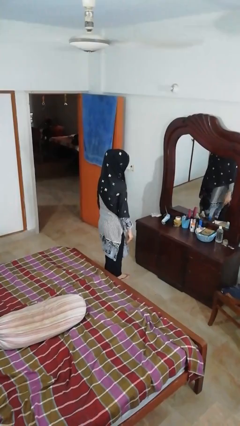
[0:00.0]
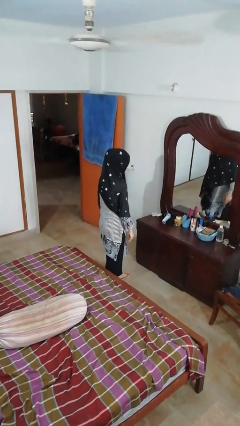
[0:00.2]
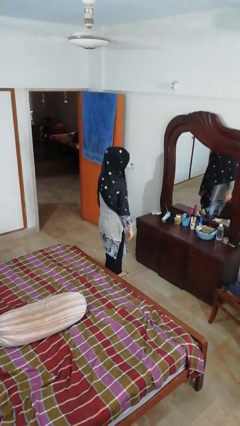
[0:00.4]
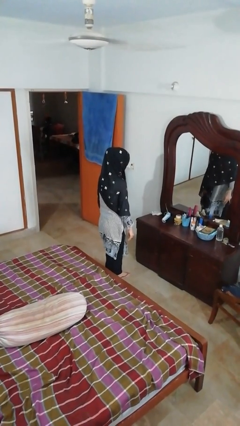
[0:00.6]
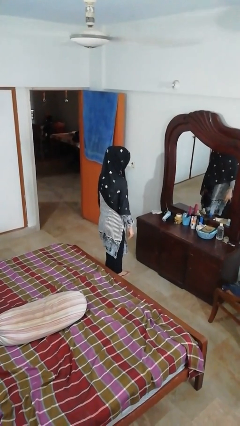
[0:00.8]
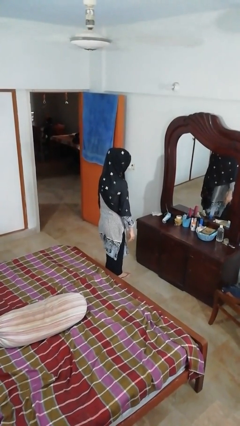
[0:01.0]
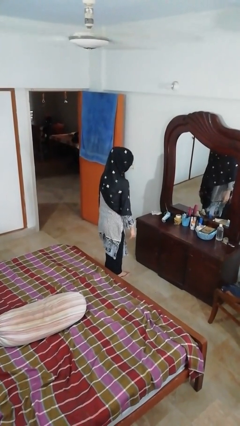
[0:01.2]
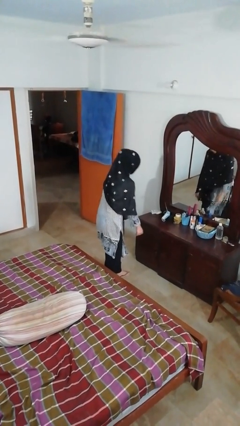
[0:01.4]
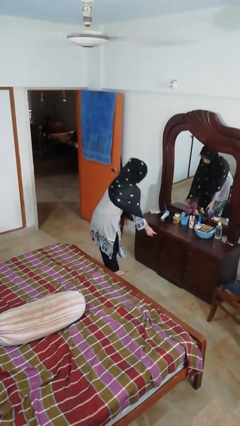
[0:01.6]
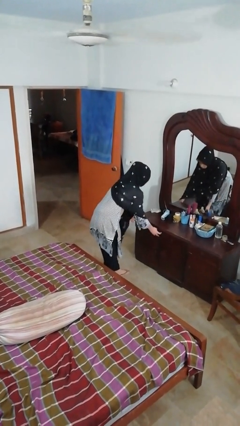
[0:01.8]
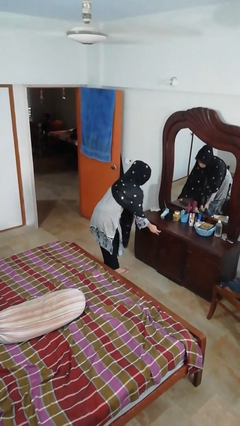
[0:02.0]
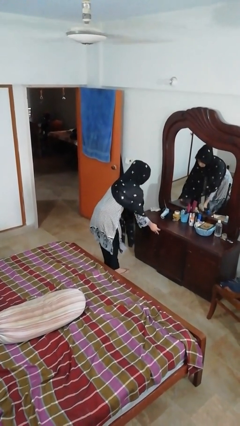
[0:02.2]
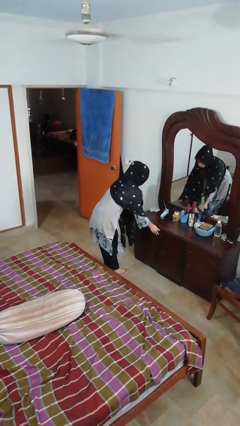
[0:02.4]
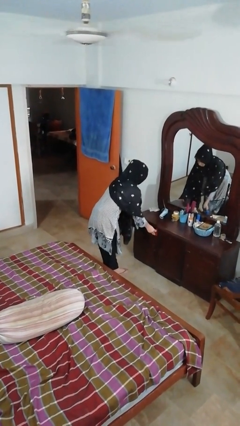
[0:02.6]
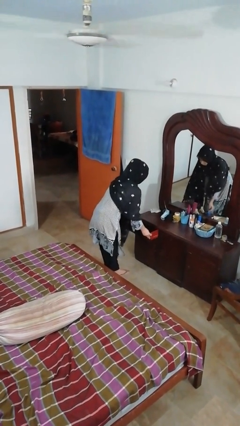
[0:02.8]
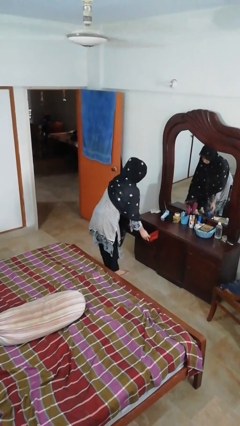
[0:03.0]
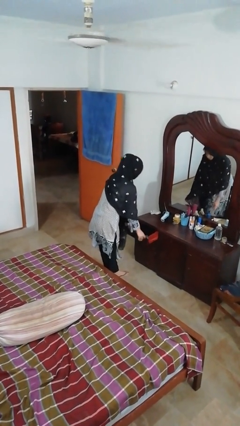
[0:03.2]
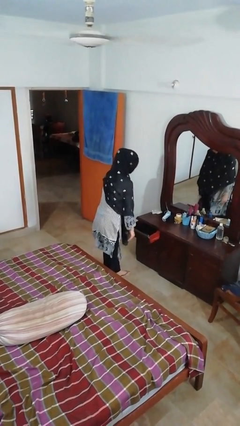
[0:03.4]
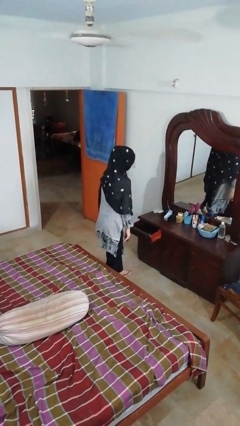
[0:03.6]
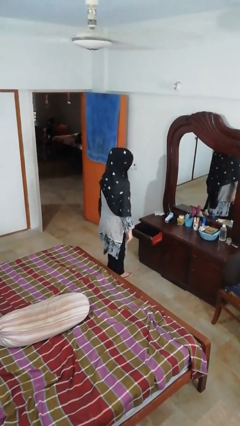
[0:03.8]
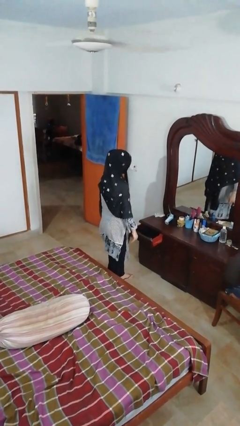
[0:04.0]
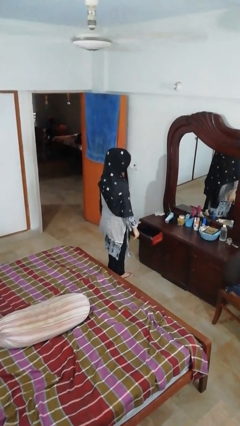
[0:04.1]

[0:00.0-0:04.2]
person opens dresser drawer

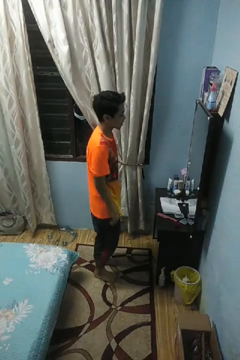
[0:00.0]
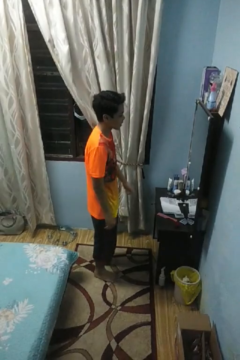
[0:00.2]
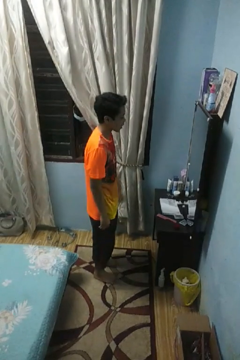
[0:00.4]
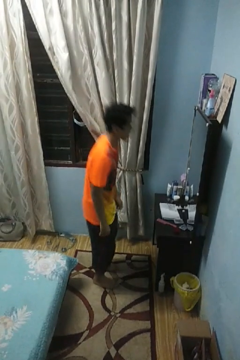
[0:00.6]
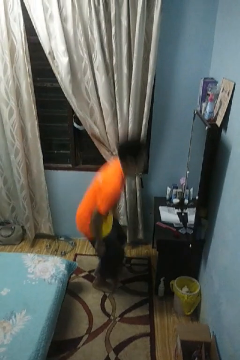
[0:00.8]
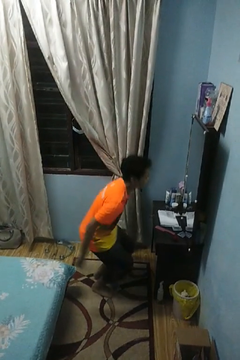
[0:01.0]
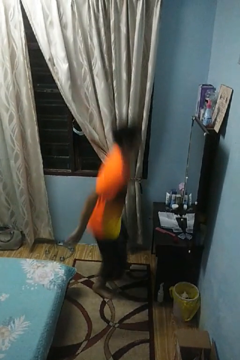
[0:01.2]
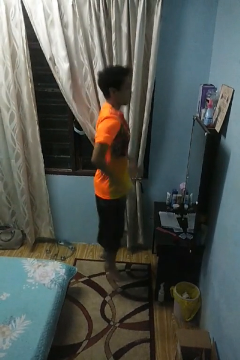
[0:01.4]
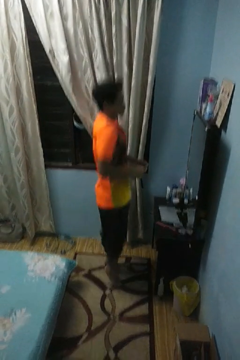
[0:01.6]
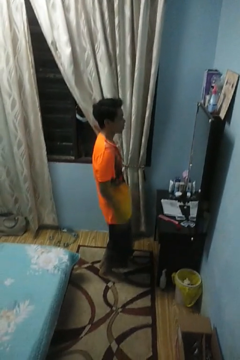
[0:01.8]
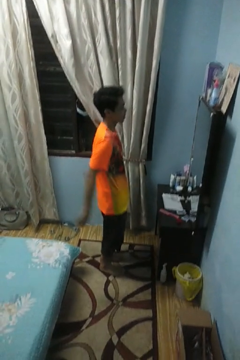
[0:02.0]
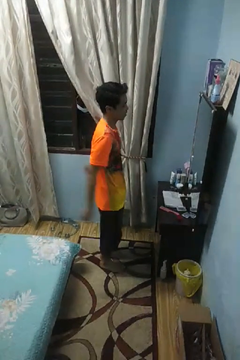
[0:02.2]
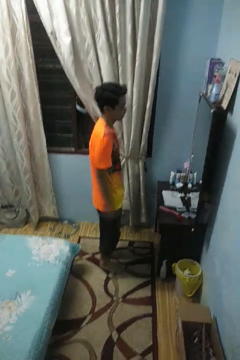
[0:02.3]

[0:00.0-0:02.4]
person jumps

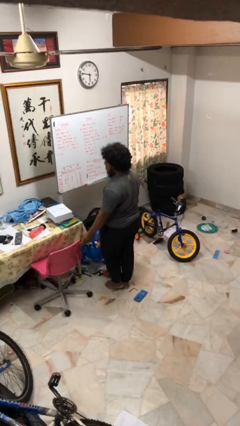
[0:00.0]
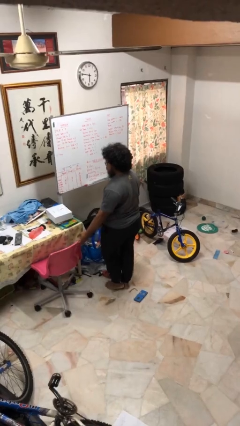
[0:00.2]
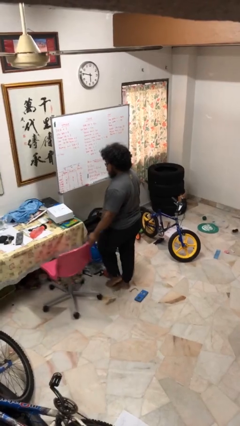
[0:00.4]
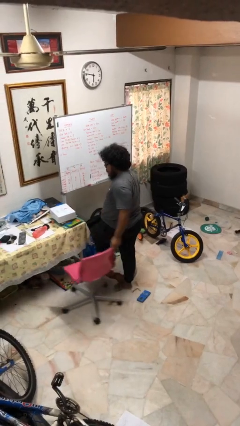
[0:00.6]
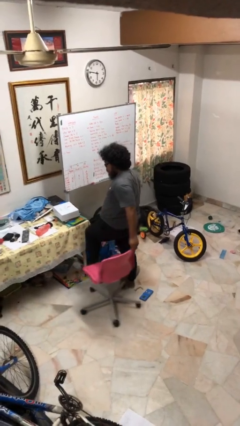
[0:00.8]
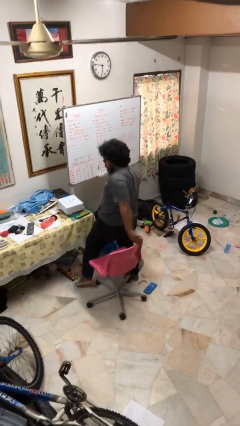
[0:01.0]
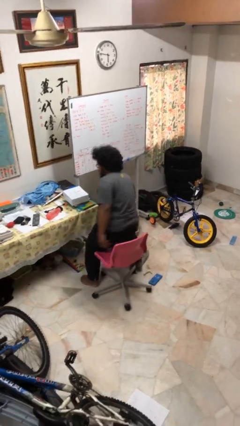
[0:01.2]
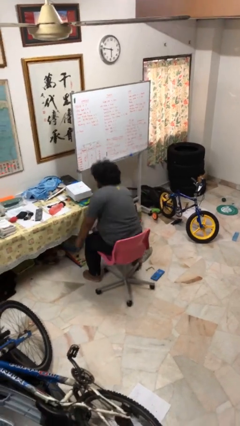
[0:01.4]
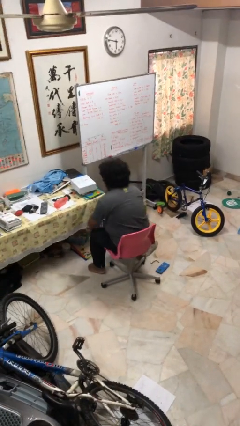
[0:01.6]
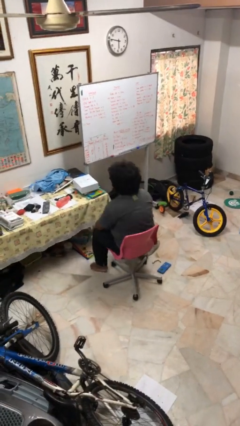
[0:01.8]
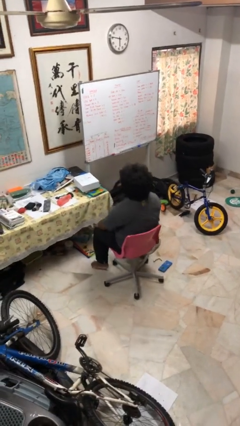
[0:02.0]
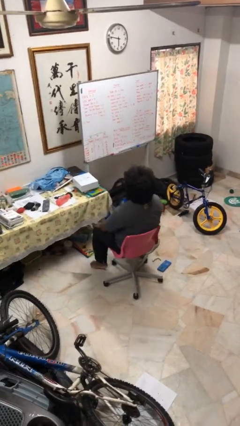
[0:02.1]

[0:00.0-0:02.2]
person sits down

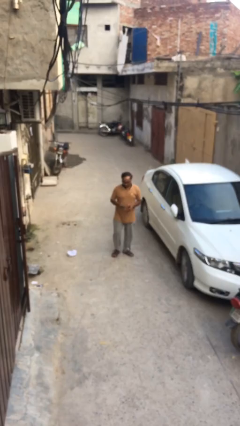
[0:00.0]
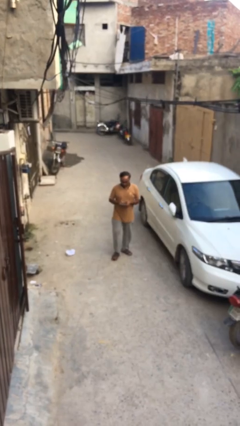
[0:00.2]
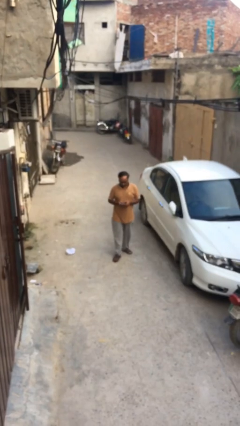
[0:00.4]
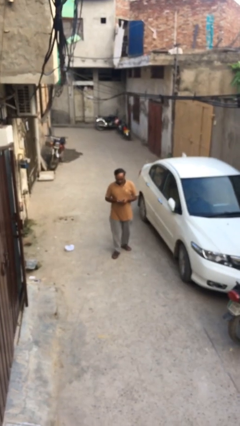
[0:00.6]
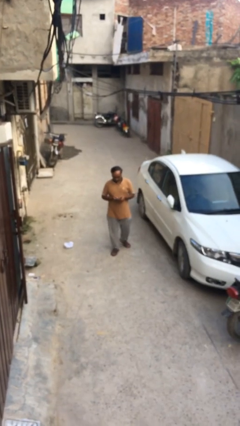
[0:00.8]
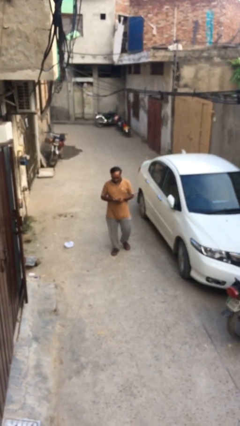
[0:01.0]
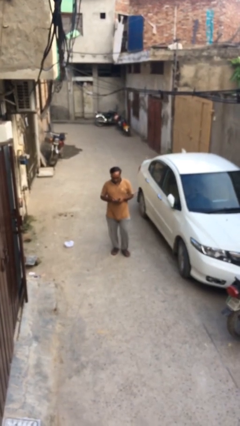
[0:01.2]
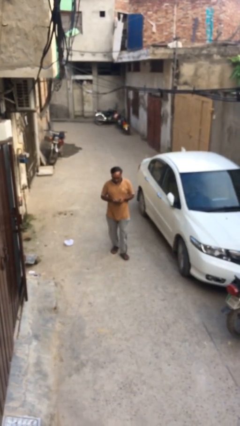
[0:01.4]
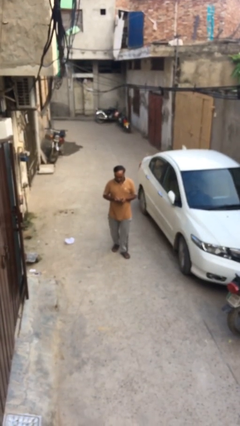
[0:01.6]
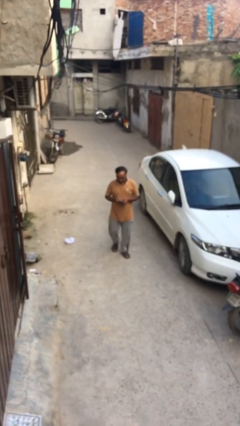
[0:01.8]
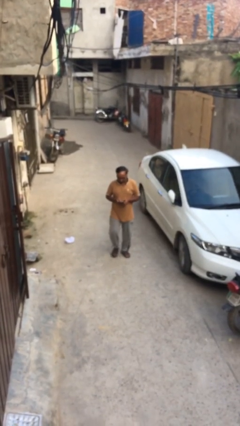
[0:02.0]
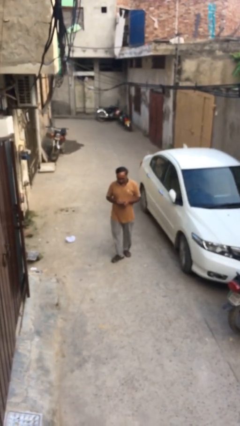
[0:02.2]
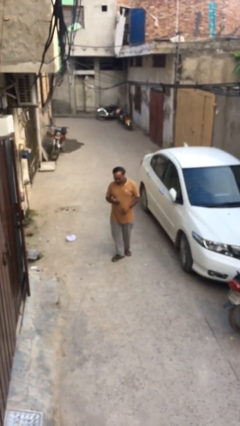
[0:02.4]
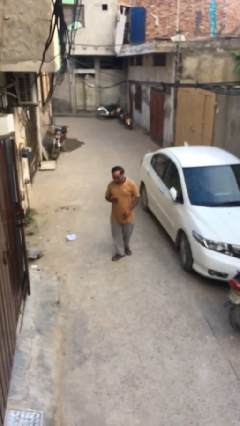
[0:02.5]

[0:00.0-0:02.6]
person texts on phone

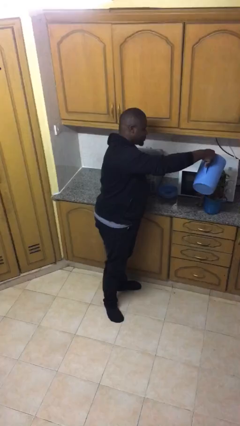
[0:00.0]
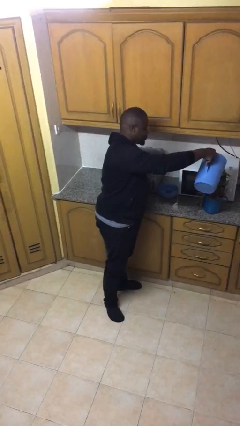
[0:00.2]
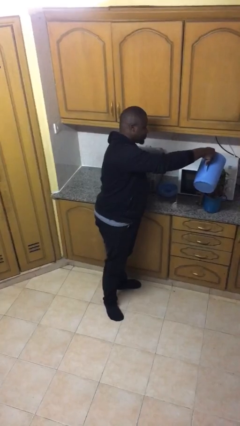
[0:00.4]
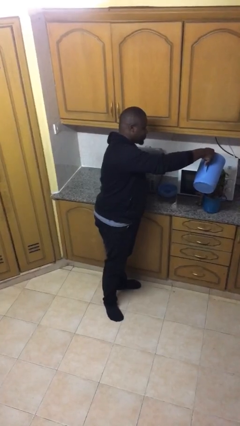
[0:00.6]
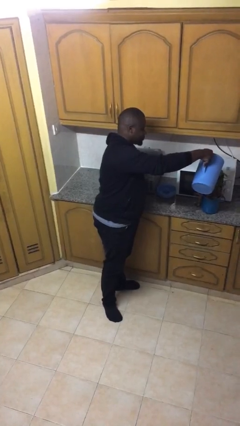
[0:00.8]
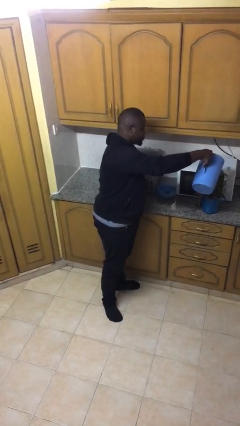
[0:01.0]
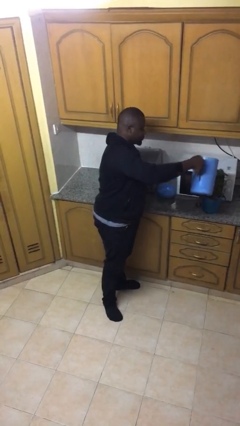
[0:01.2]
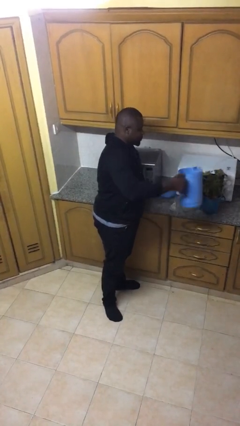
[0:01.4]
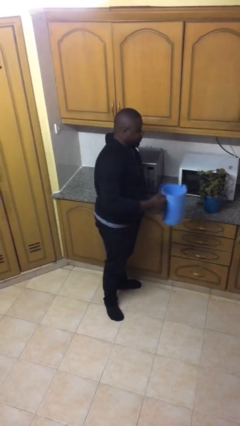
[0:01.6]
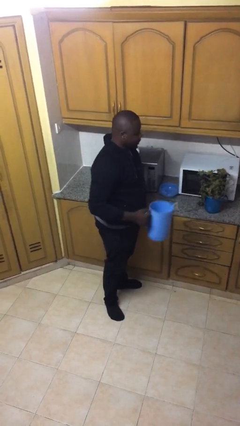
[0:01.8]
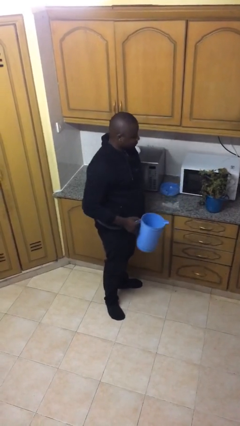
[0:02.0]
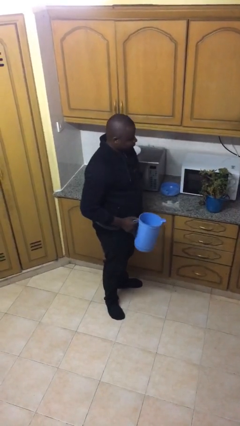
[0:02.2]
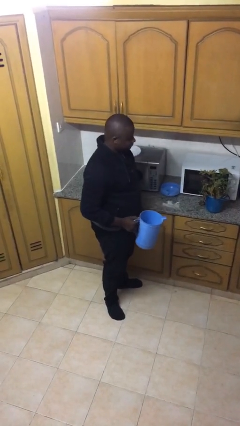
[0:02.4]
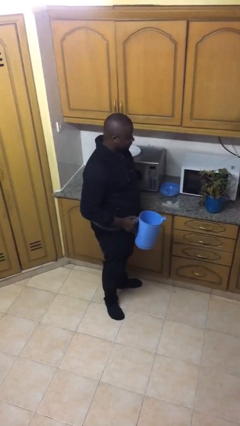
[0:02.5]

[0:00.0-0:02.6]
person waters houseplant

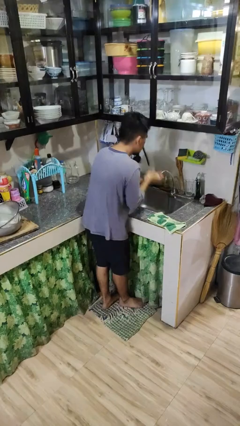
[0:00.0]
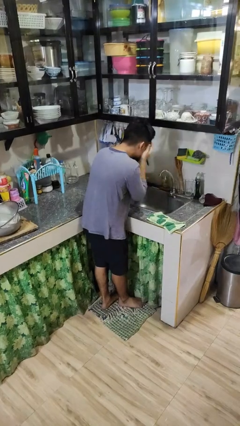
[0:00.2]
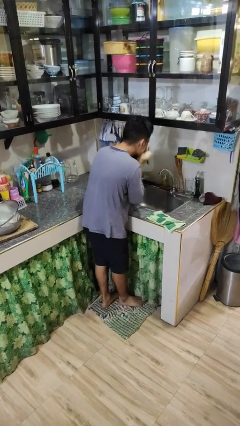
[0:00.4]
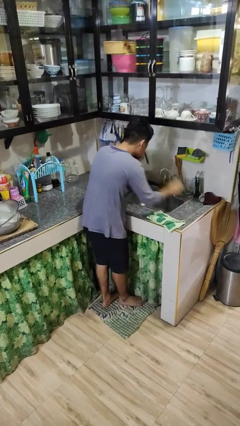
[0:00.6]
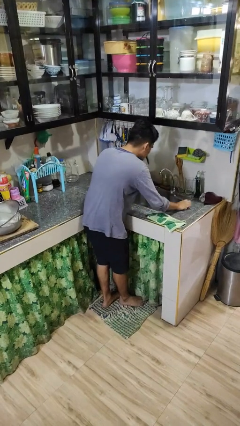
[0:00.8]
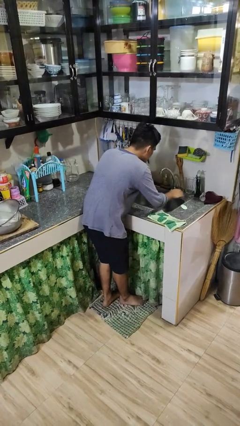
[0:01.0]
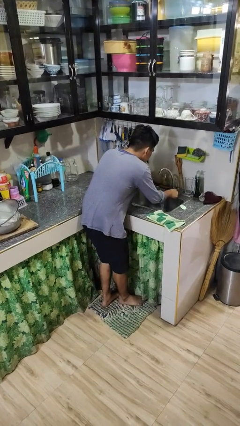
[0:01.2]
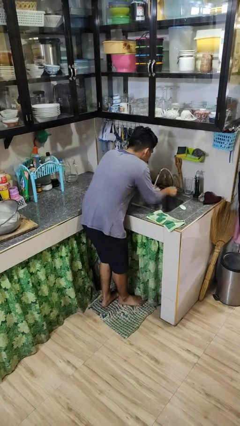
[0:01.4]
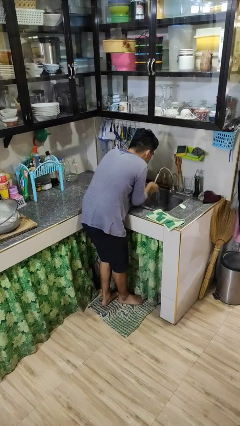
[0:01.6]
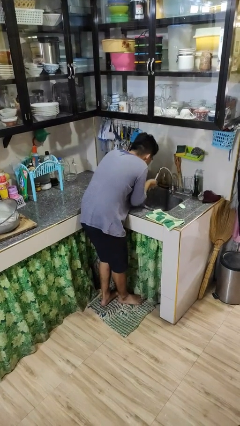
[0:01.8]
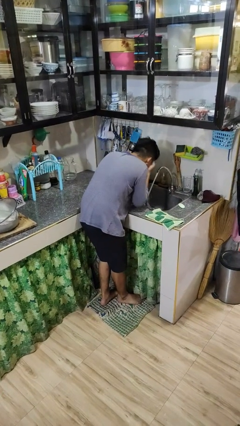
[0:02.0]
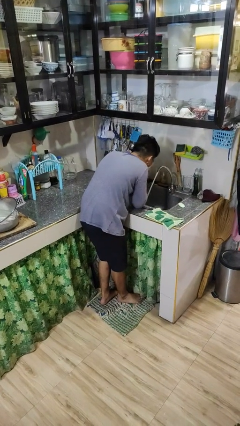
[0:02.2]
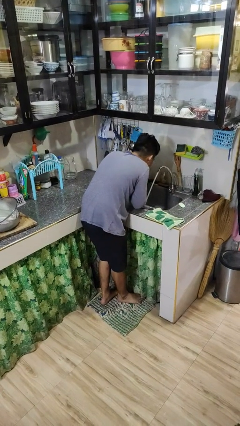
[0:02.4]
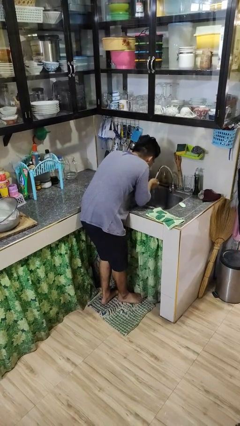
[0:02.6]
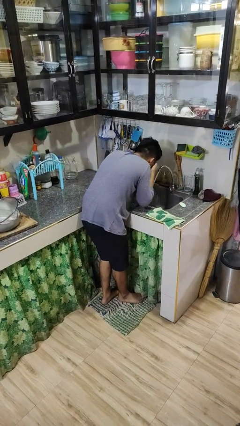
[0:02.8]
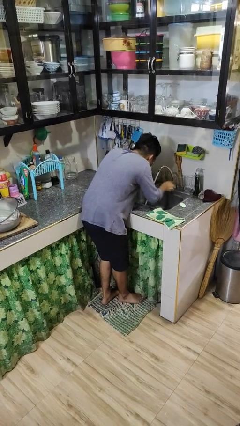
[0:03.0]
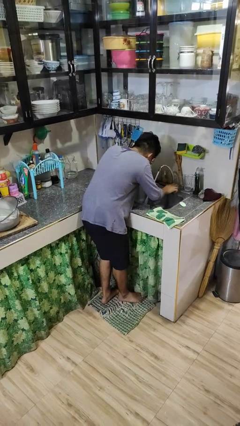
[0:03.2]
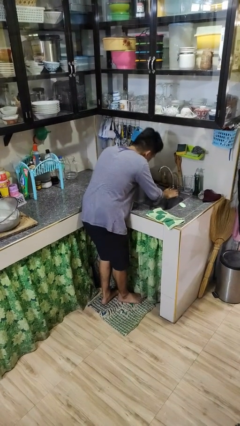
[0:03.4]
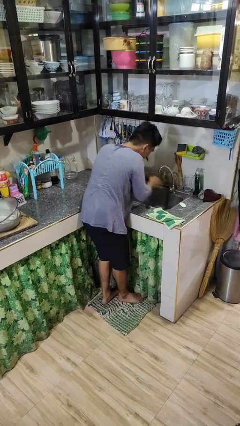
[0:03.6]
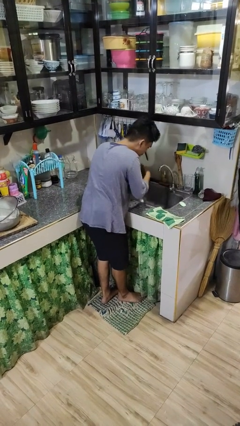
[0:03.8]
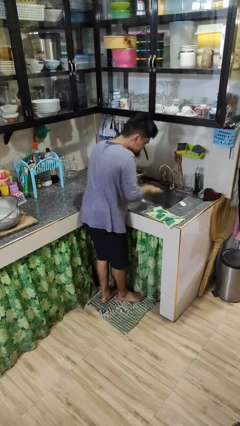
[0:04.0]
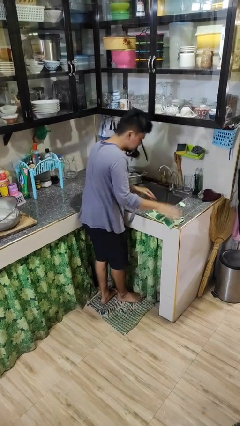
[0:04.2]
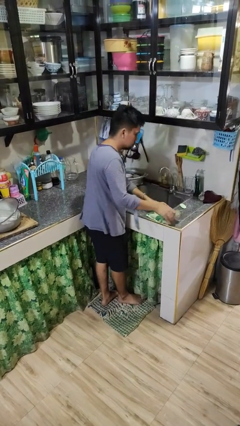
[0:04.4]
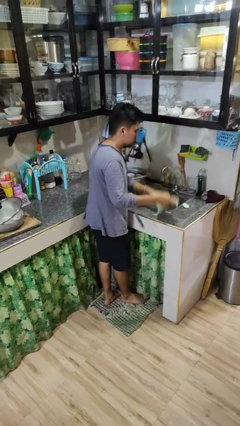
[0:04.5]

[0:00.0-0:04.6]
person washes face
